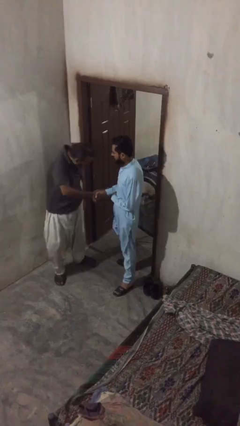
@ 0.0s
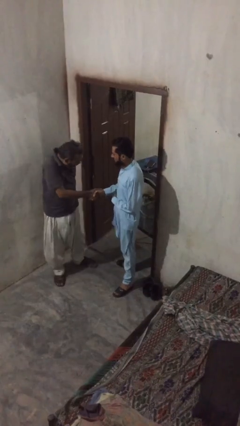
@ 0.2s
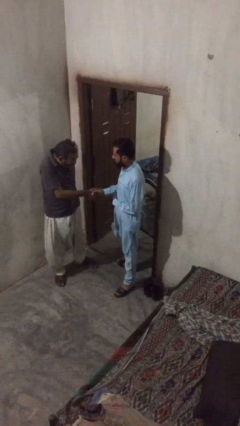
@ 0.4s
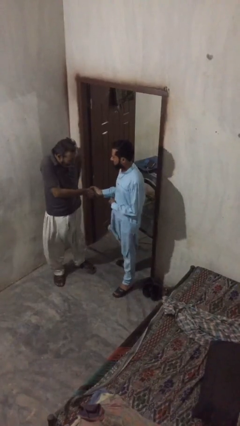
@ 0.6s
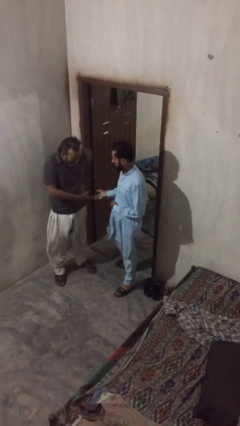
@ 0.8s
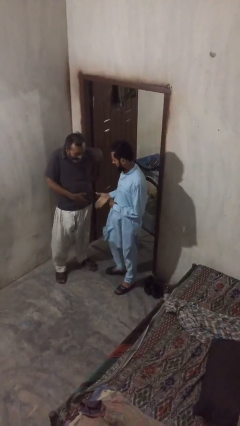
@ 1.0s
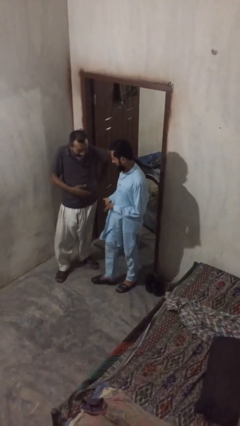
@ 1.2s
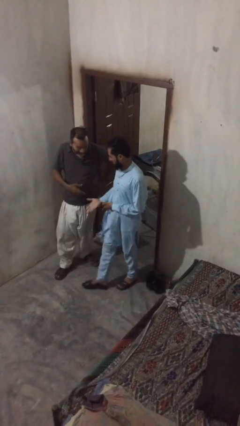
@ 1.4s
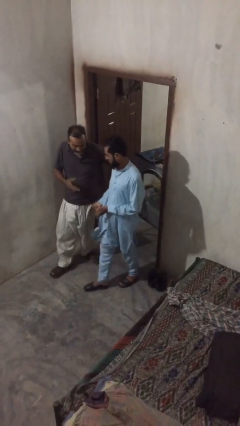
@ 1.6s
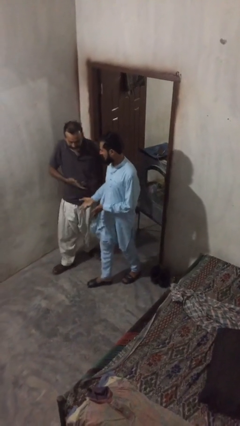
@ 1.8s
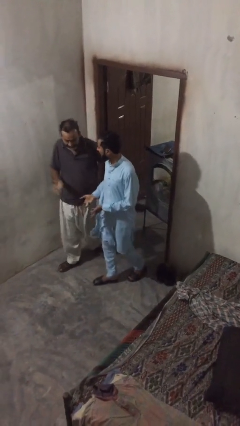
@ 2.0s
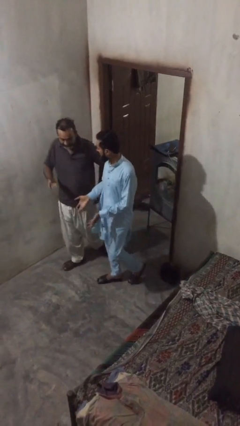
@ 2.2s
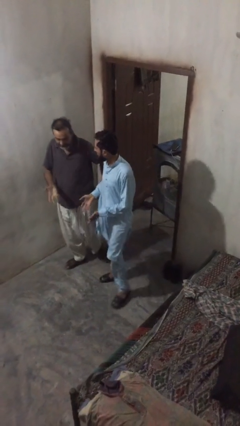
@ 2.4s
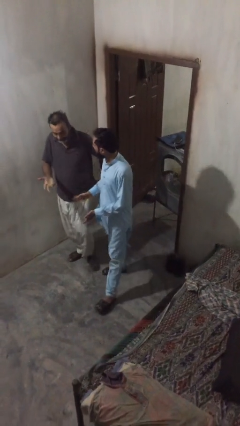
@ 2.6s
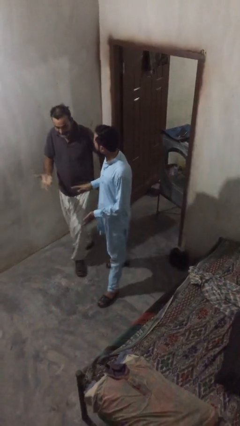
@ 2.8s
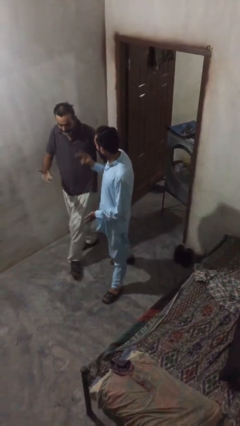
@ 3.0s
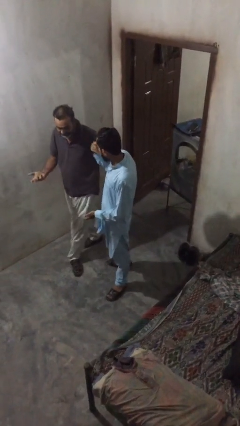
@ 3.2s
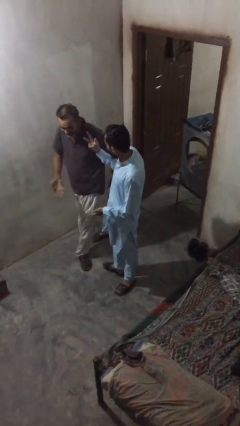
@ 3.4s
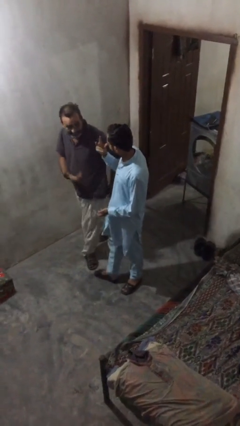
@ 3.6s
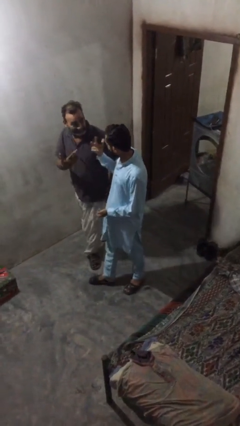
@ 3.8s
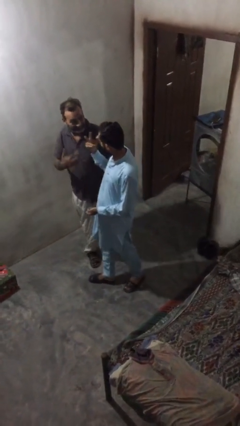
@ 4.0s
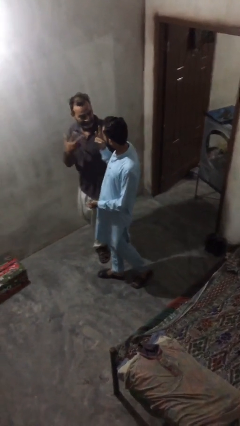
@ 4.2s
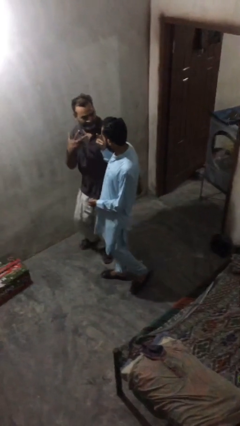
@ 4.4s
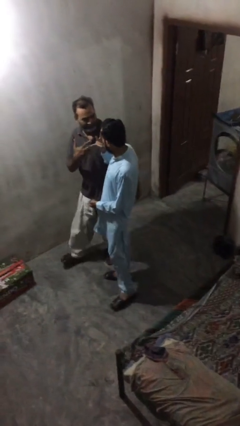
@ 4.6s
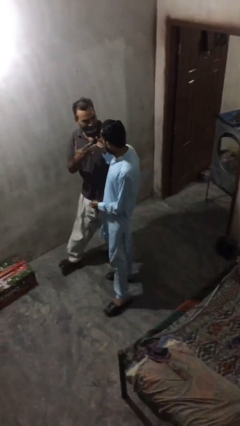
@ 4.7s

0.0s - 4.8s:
person talks to person

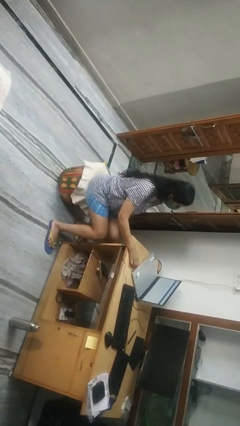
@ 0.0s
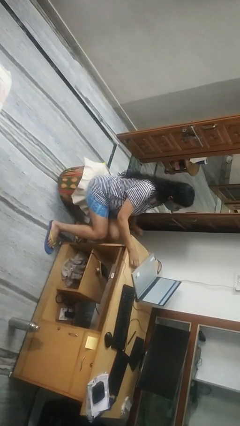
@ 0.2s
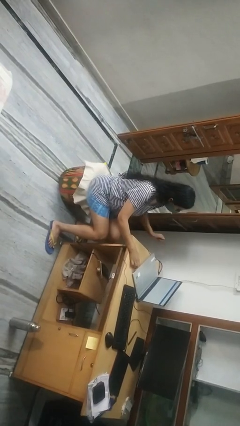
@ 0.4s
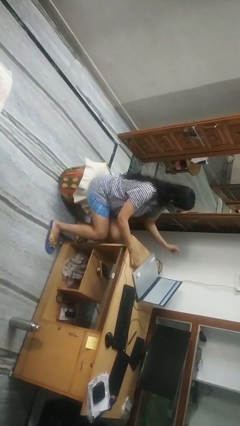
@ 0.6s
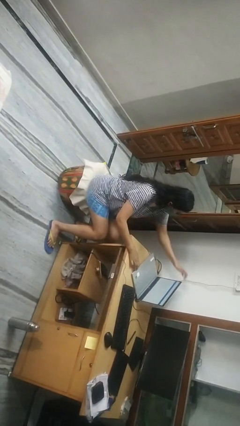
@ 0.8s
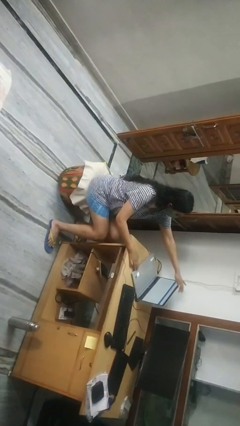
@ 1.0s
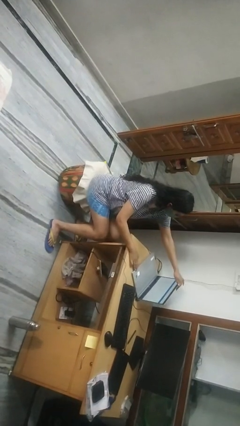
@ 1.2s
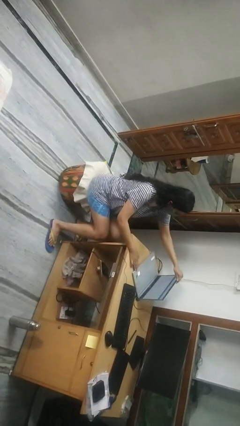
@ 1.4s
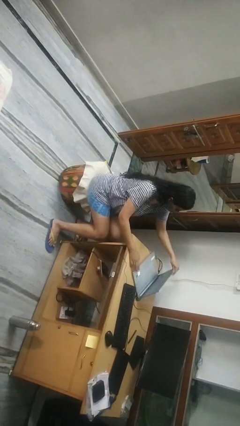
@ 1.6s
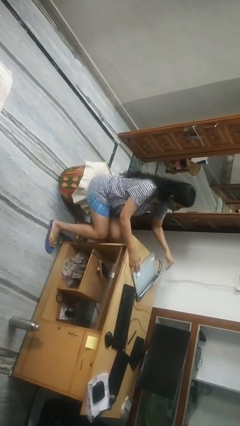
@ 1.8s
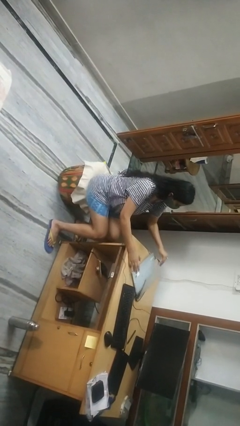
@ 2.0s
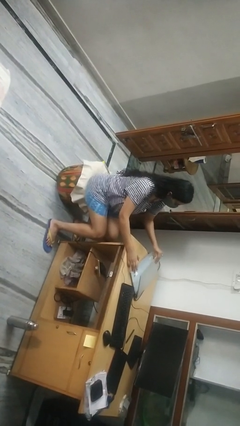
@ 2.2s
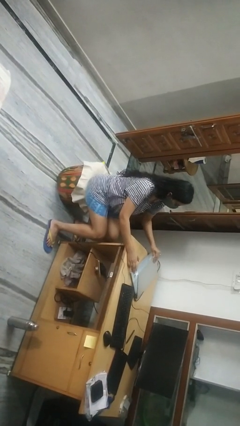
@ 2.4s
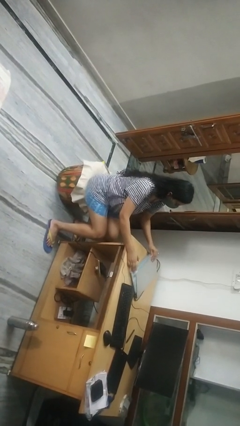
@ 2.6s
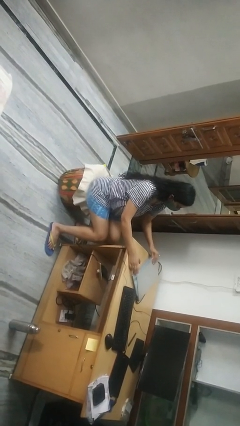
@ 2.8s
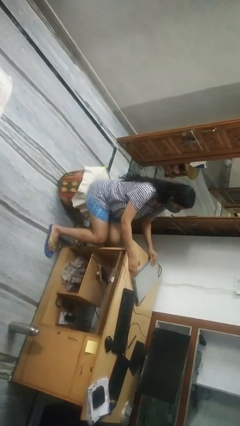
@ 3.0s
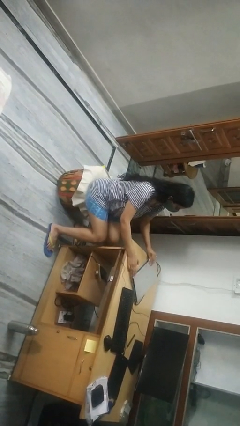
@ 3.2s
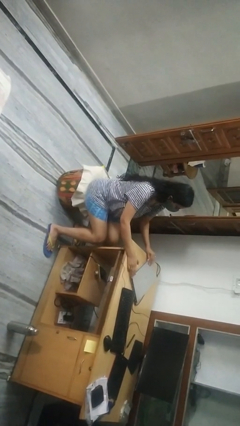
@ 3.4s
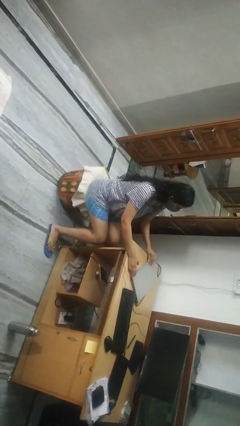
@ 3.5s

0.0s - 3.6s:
person closes laptop

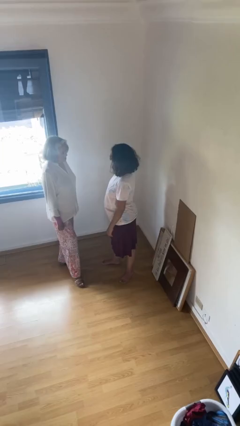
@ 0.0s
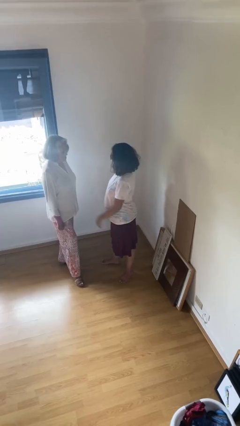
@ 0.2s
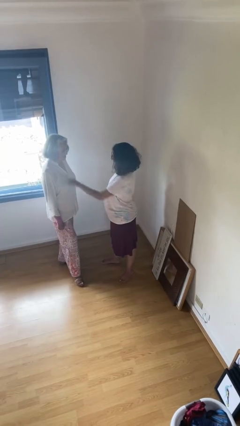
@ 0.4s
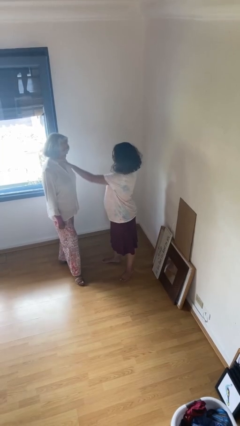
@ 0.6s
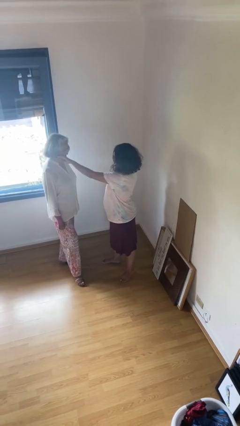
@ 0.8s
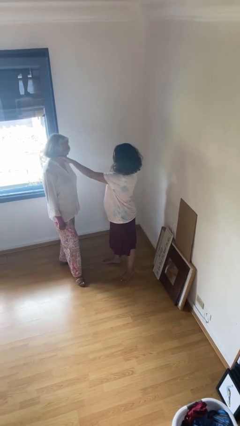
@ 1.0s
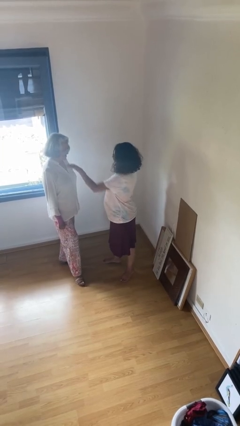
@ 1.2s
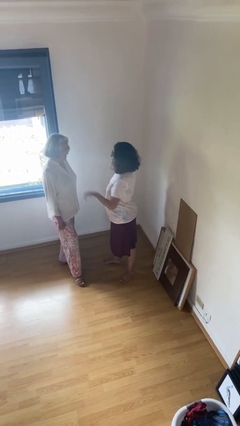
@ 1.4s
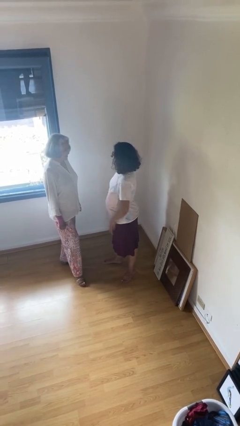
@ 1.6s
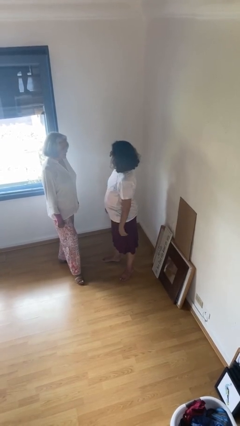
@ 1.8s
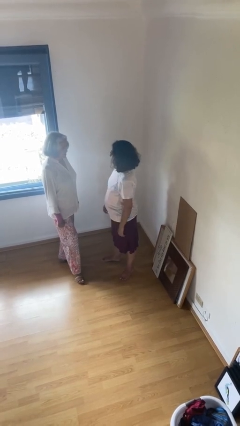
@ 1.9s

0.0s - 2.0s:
person touches face of person

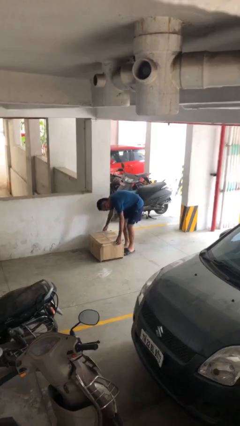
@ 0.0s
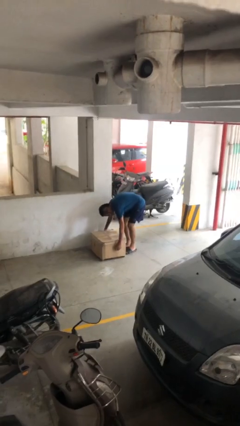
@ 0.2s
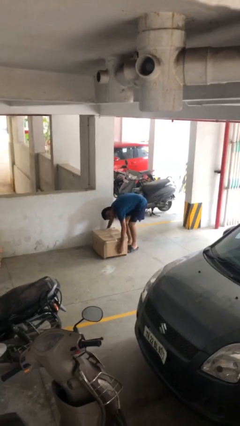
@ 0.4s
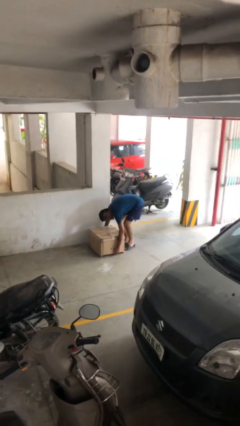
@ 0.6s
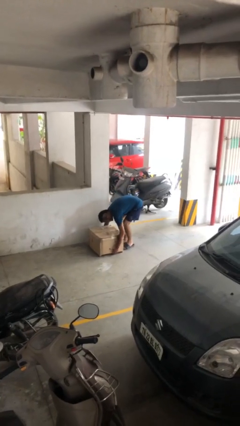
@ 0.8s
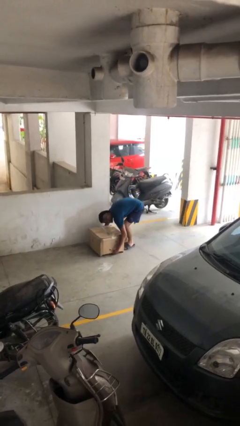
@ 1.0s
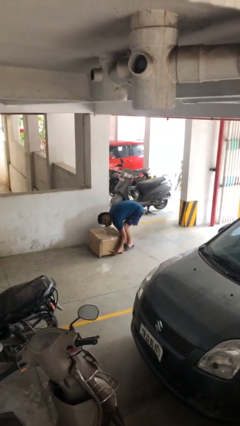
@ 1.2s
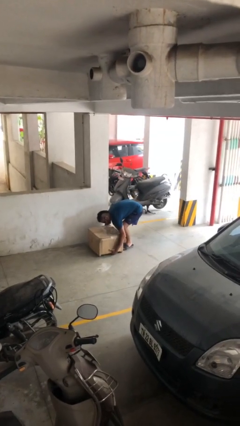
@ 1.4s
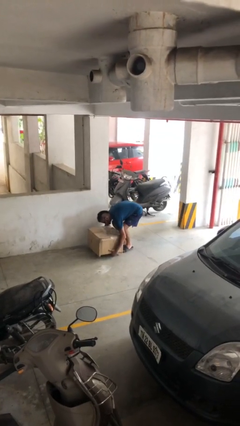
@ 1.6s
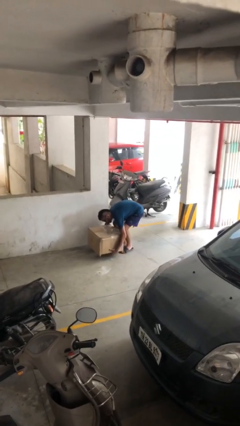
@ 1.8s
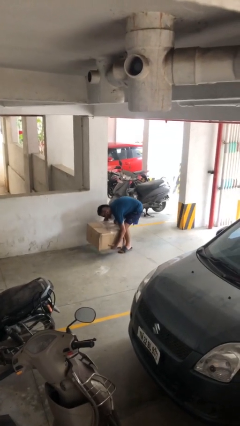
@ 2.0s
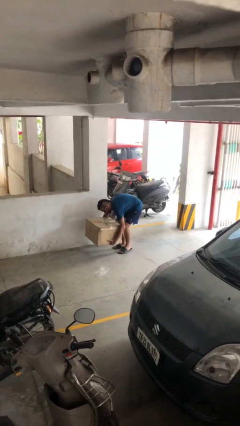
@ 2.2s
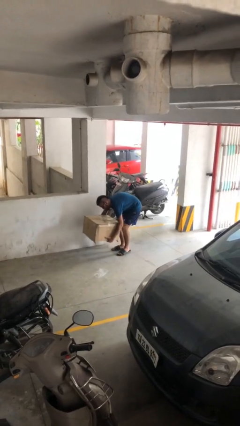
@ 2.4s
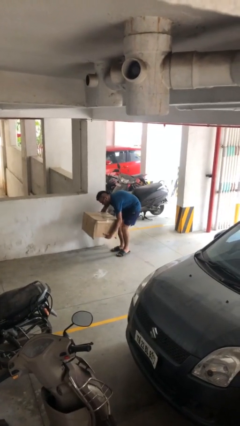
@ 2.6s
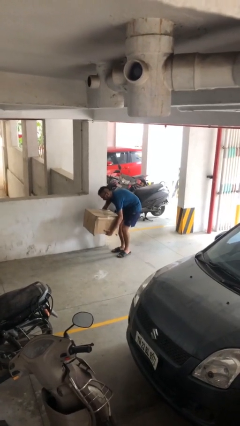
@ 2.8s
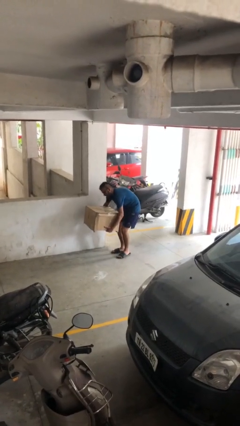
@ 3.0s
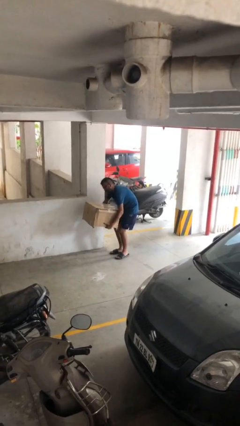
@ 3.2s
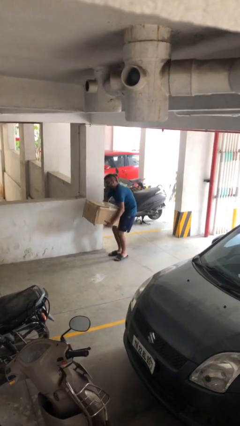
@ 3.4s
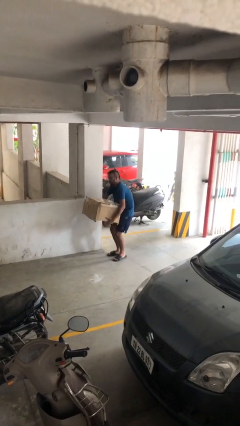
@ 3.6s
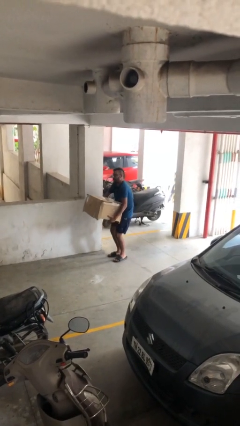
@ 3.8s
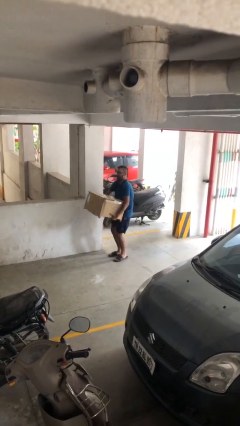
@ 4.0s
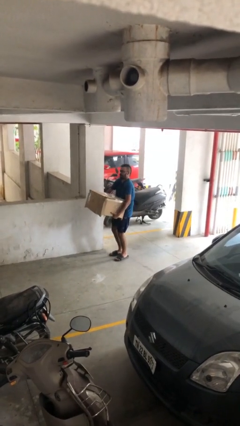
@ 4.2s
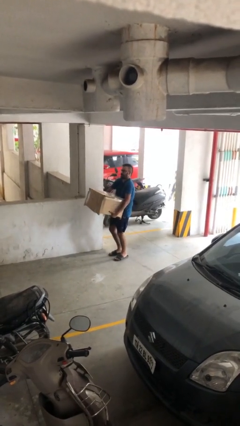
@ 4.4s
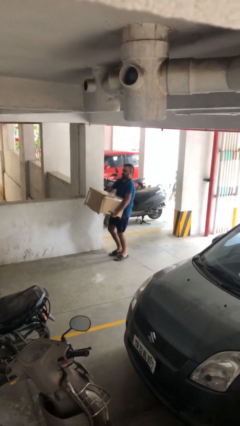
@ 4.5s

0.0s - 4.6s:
person picks up object from floor

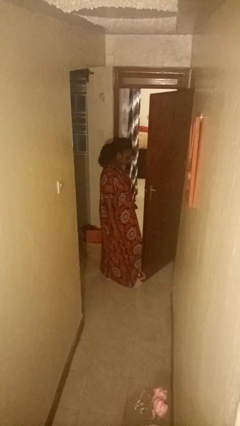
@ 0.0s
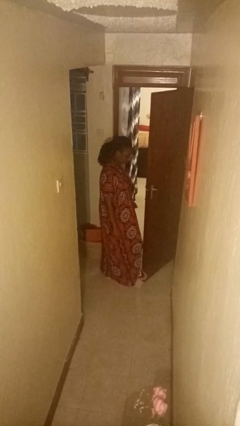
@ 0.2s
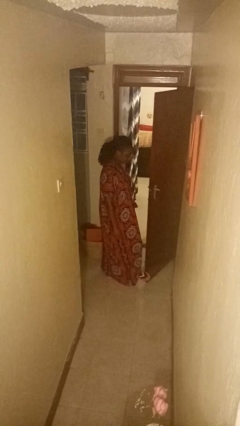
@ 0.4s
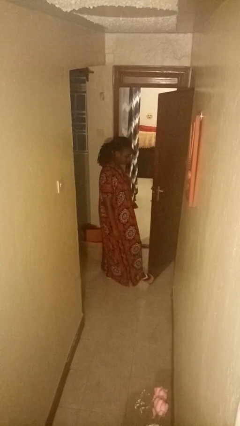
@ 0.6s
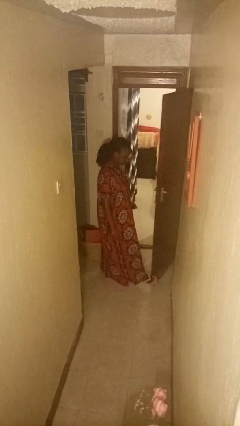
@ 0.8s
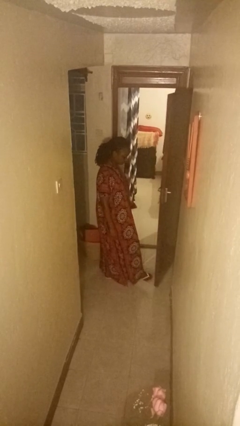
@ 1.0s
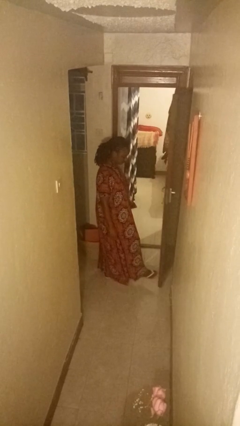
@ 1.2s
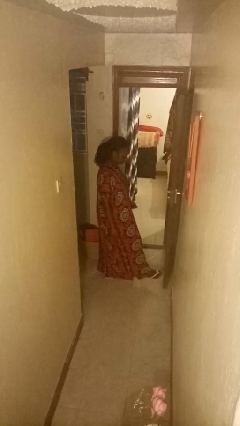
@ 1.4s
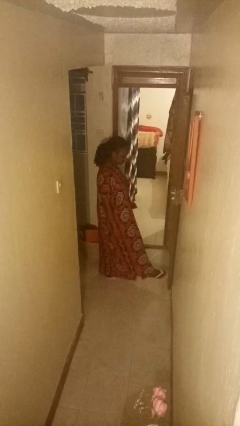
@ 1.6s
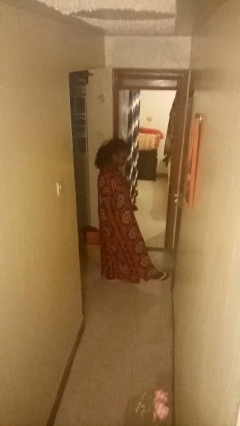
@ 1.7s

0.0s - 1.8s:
person closes door with foot

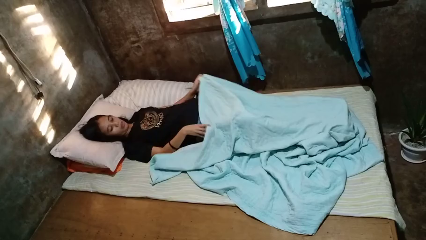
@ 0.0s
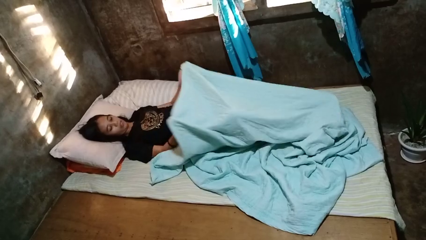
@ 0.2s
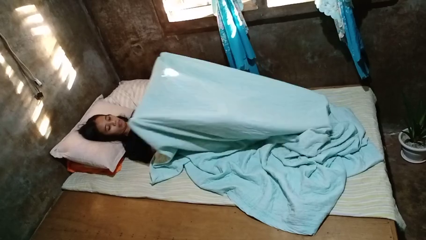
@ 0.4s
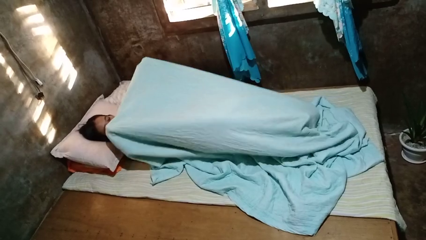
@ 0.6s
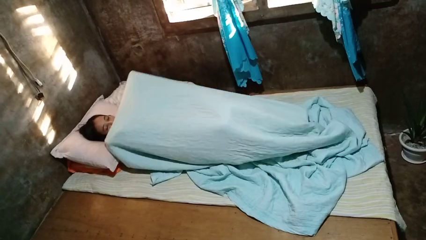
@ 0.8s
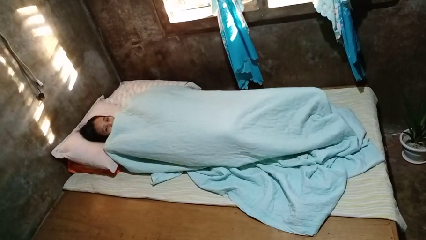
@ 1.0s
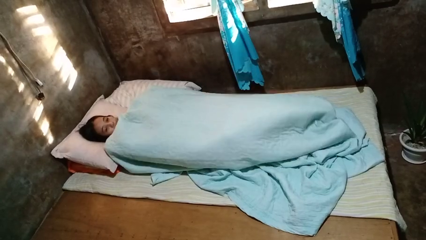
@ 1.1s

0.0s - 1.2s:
person covers with bedsheets
